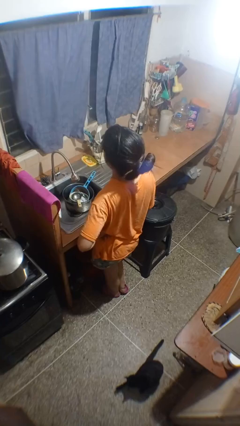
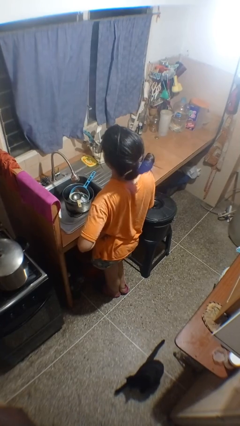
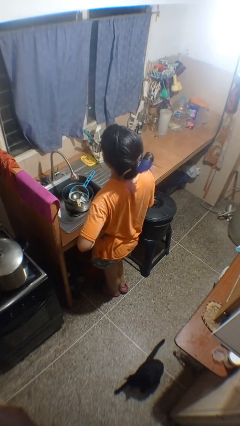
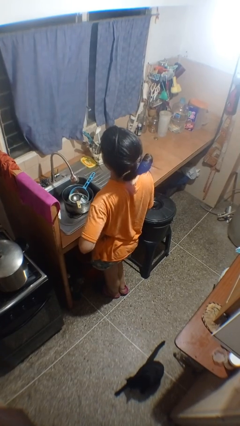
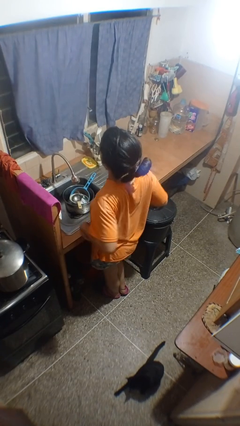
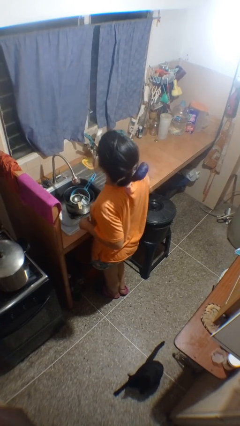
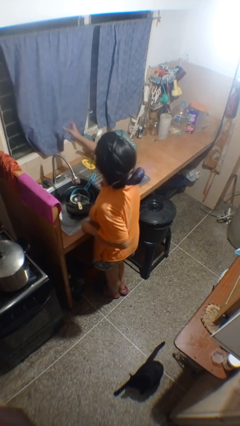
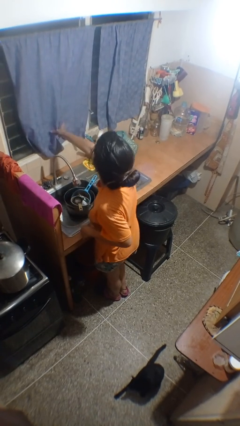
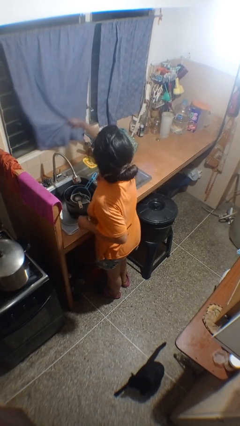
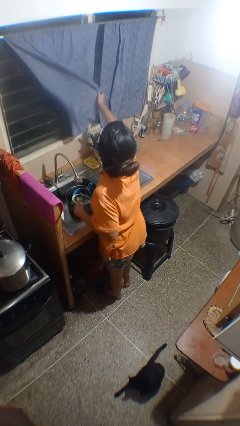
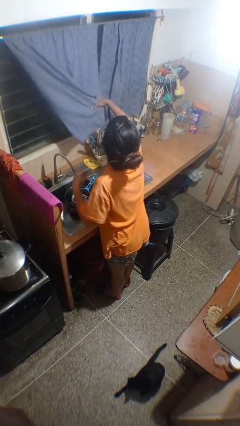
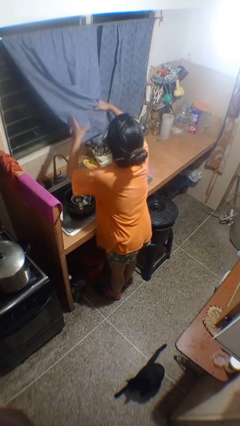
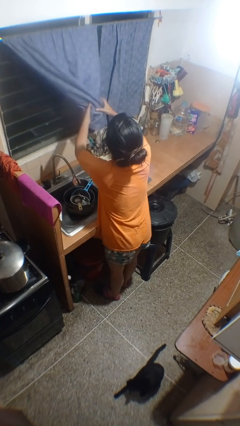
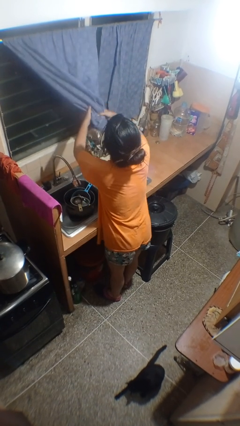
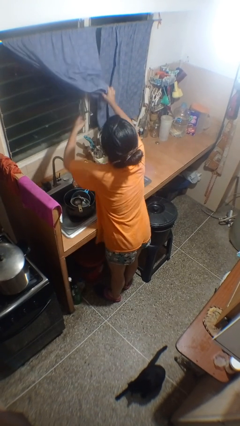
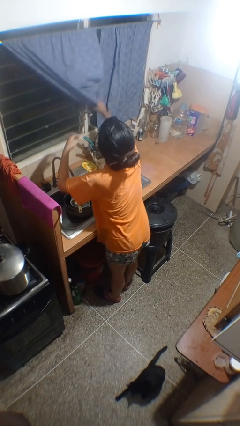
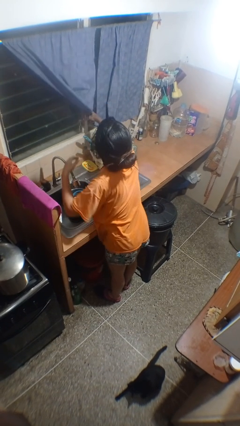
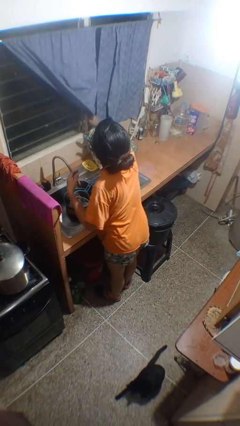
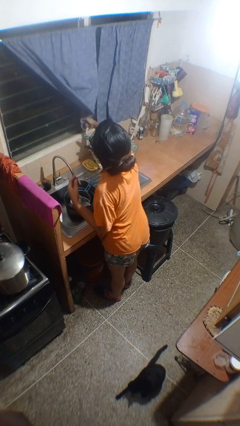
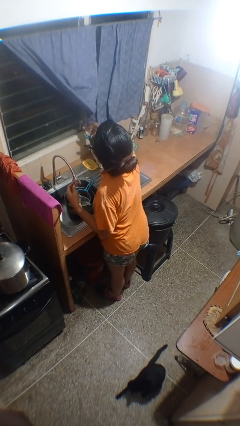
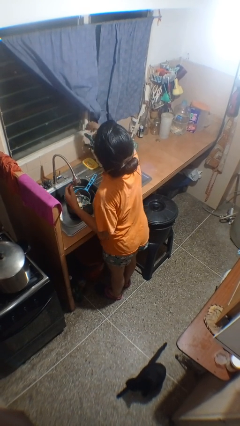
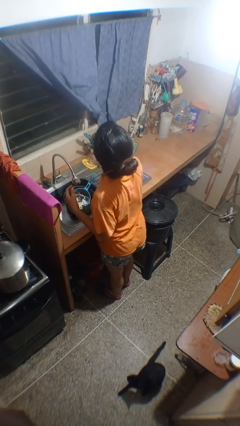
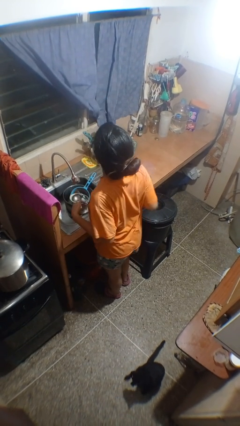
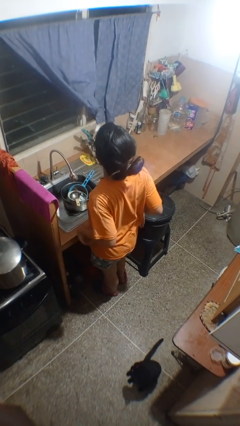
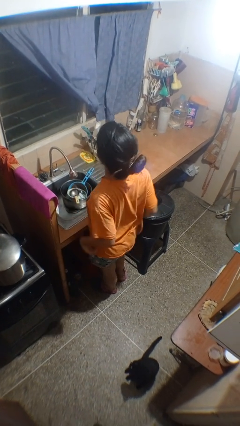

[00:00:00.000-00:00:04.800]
person opens curtains

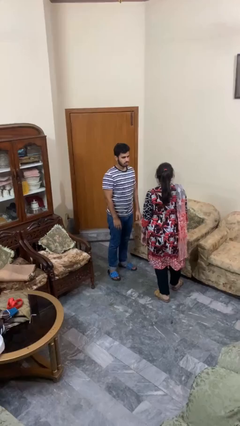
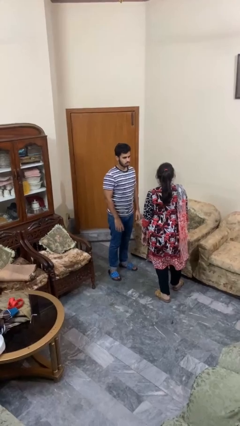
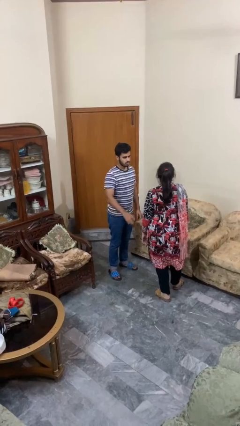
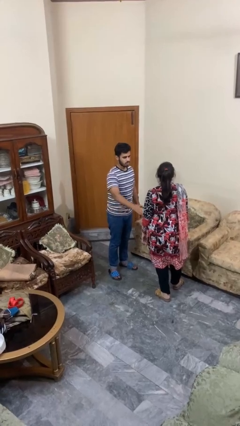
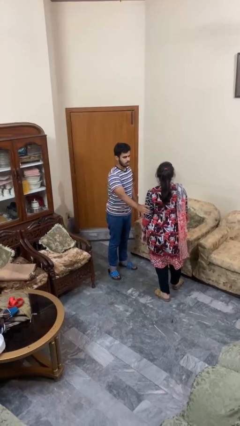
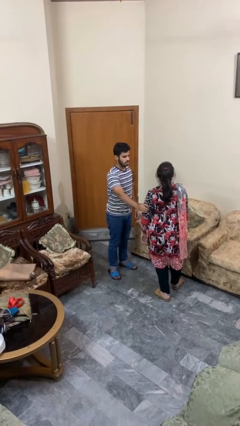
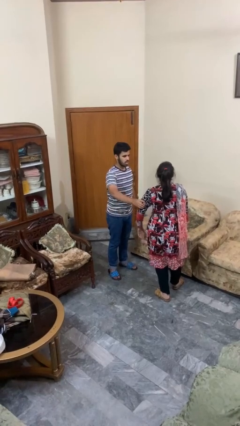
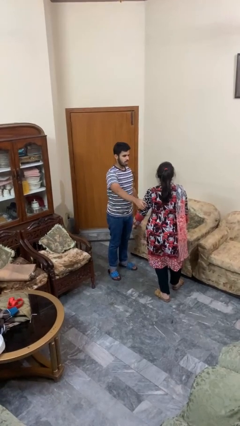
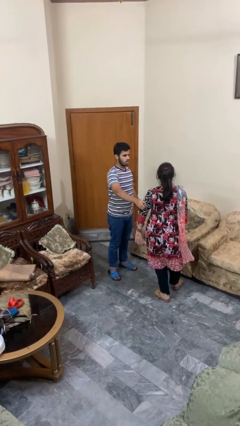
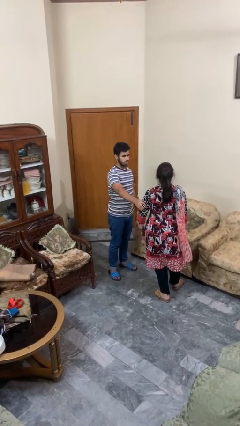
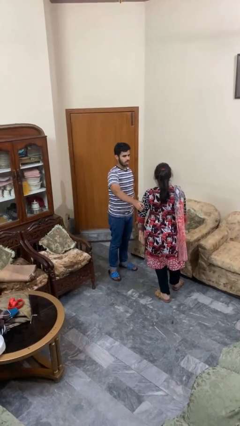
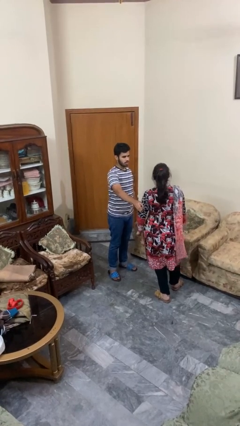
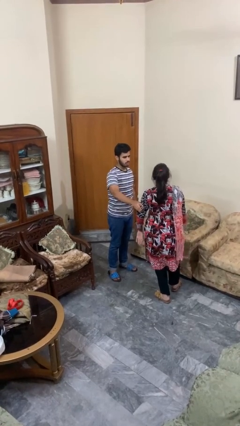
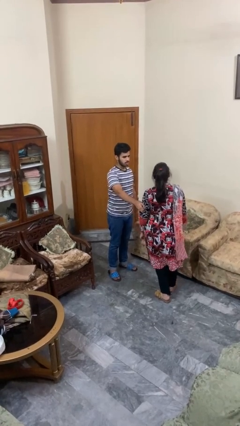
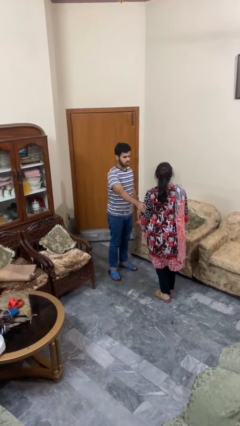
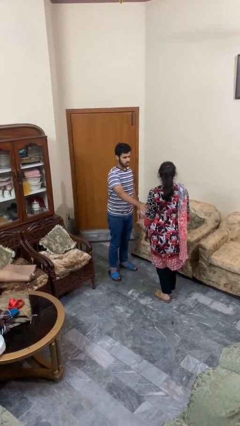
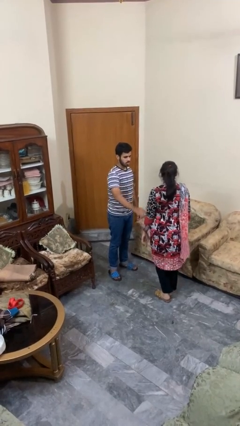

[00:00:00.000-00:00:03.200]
person grabs person by bicep

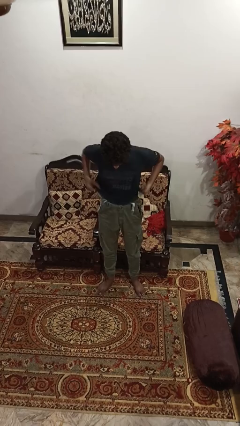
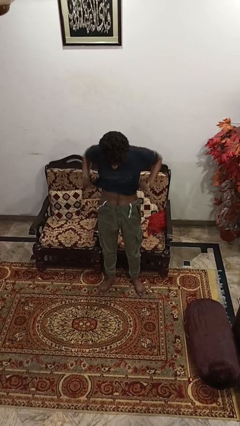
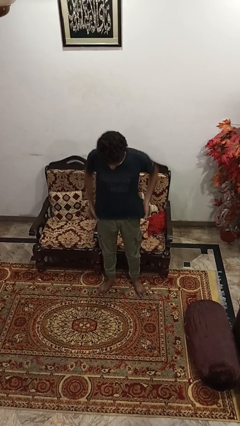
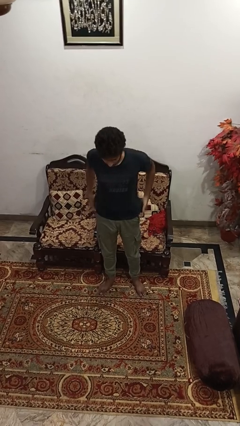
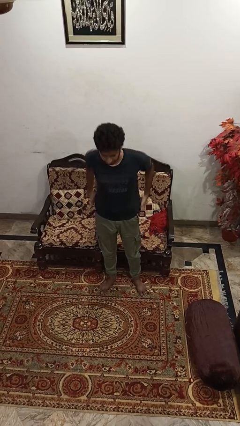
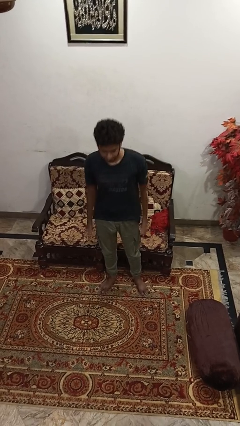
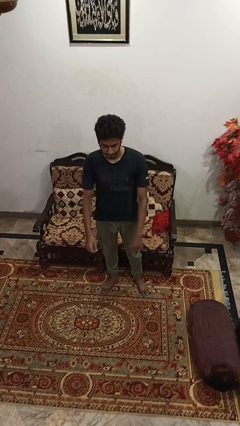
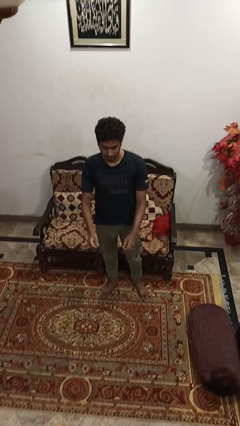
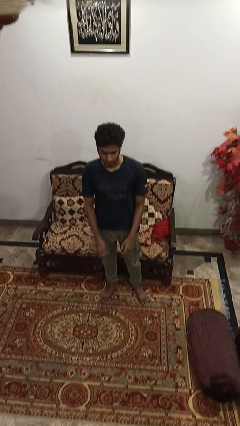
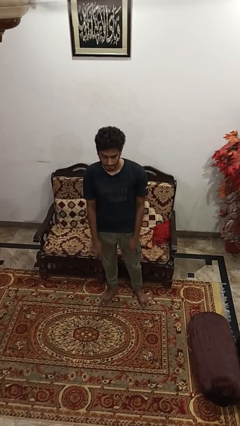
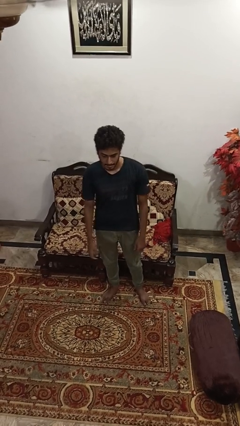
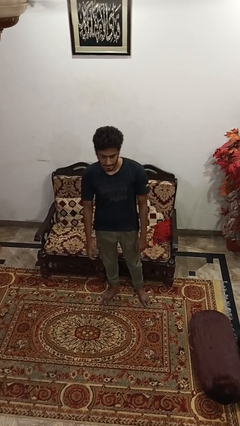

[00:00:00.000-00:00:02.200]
person untucks shirt

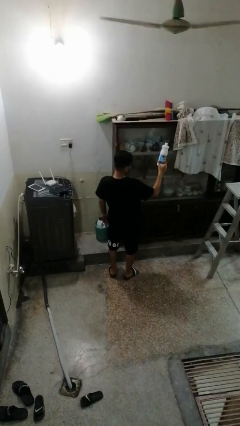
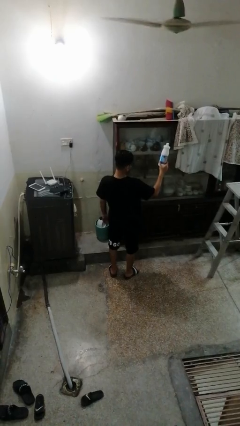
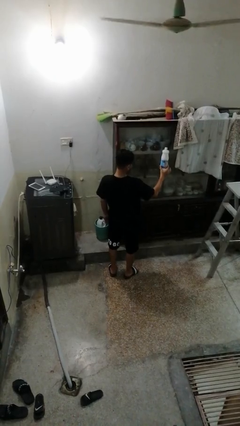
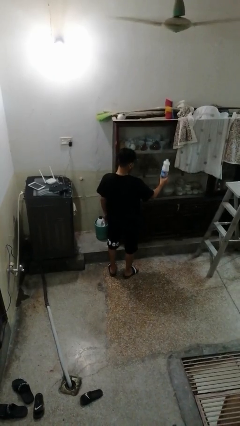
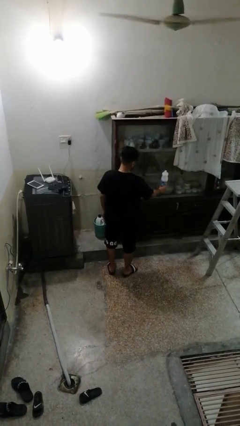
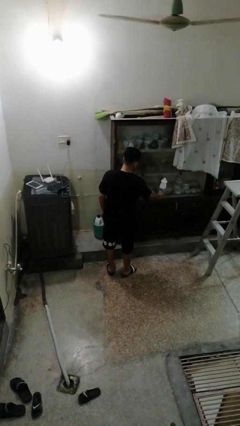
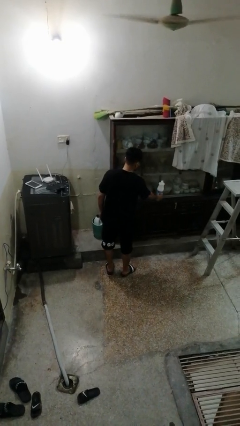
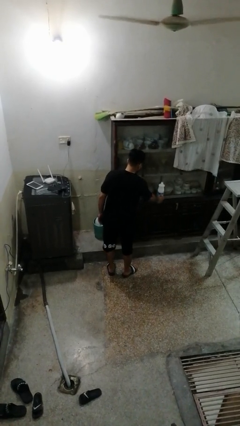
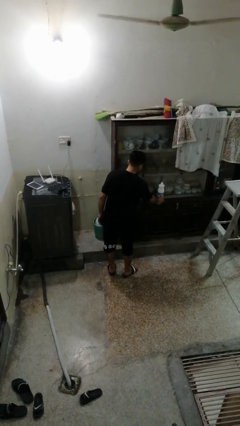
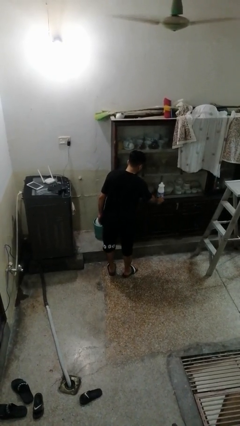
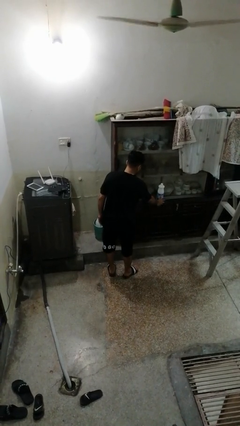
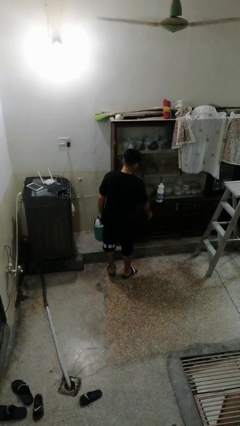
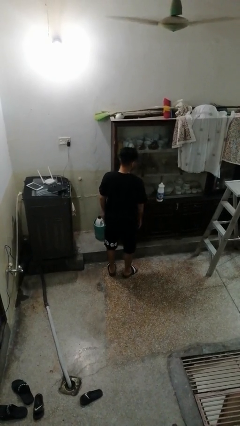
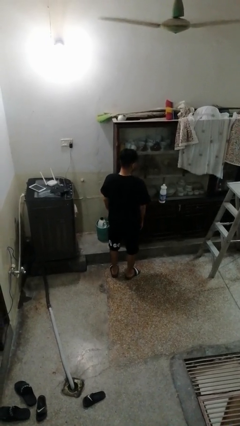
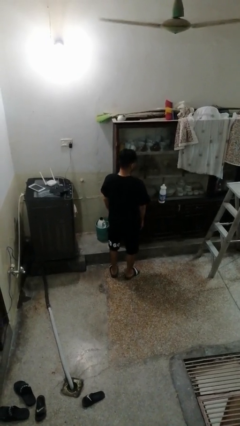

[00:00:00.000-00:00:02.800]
person puts down object on shelf

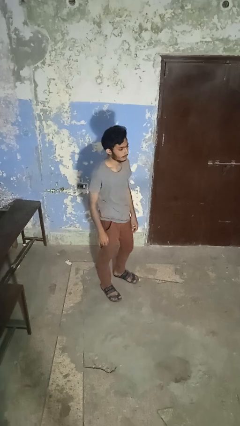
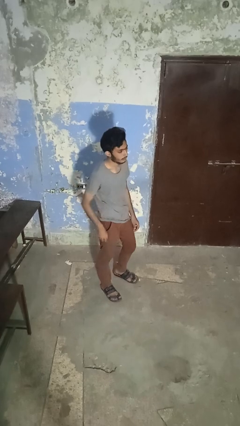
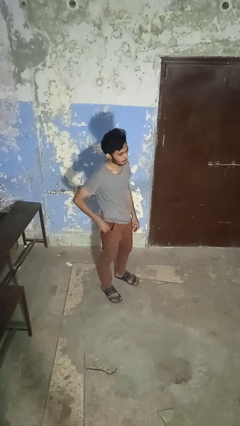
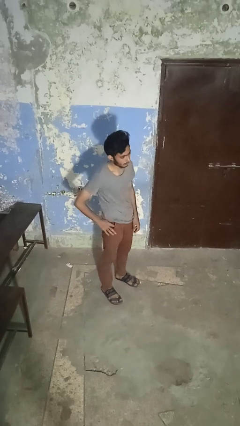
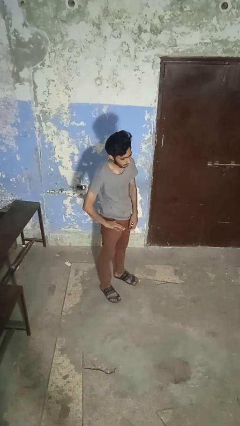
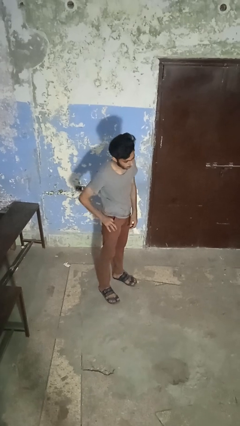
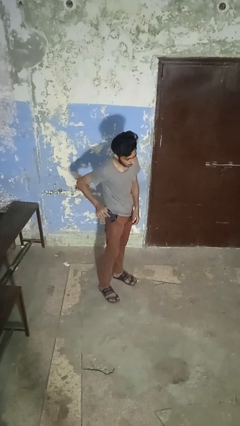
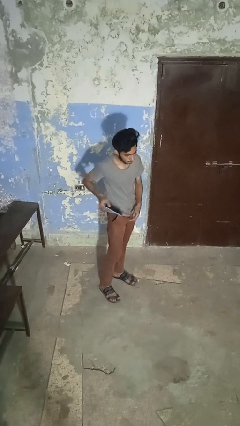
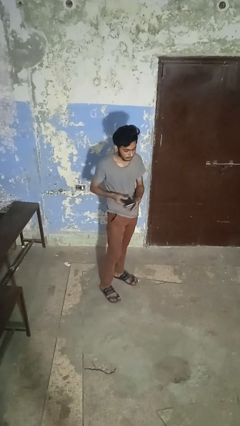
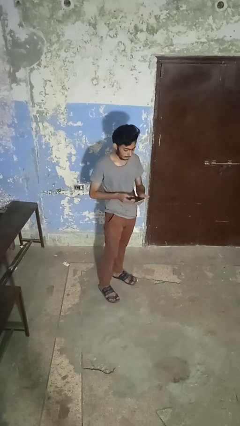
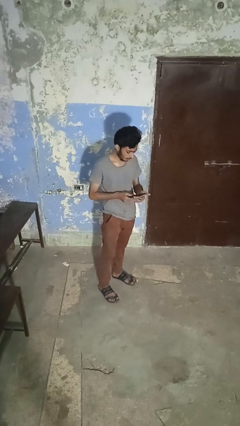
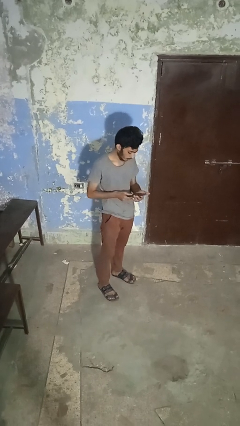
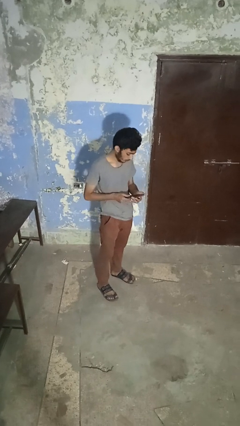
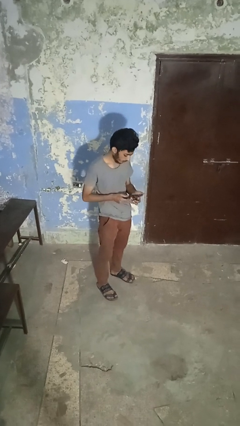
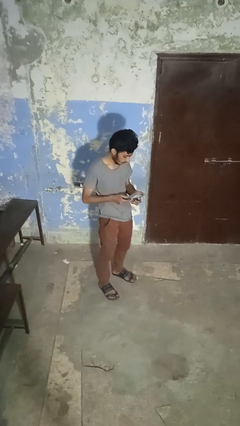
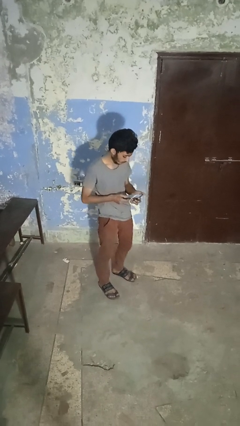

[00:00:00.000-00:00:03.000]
person takes phone from pocket

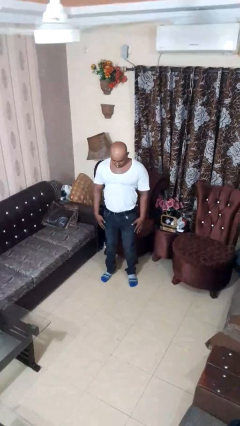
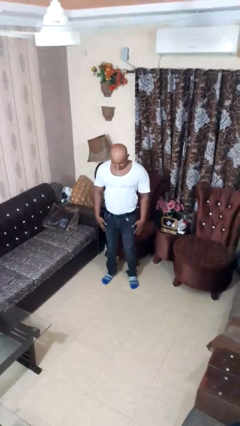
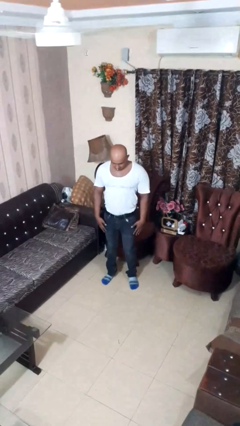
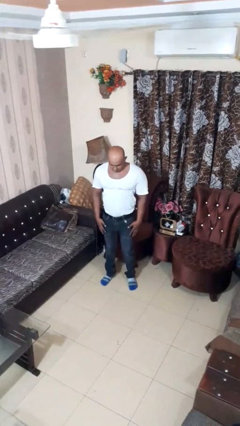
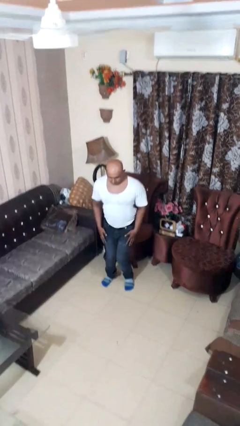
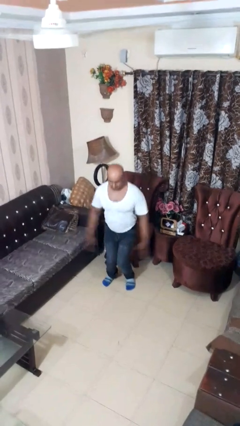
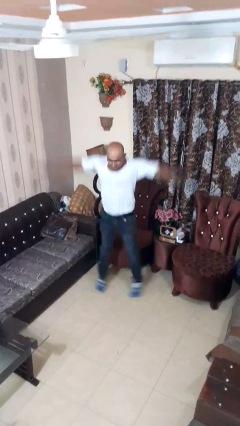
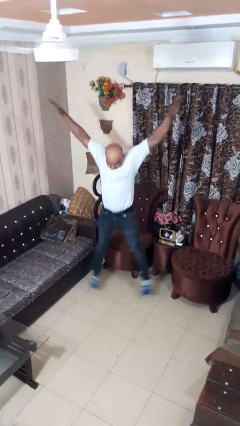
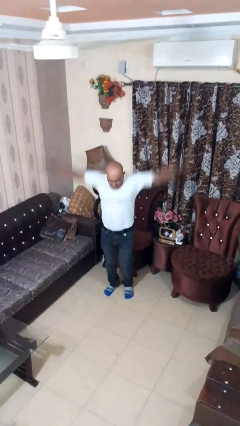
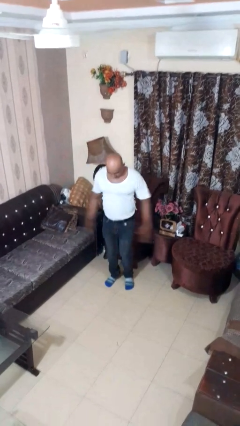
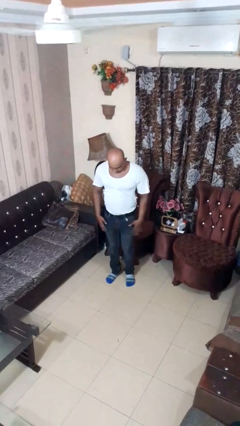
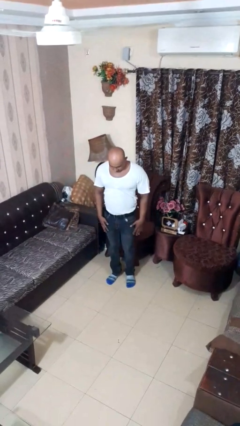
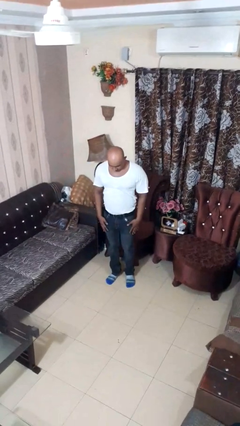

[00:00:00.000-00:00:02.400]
person exercises with jumping jacks
